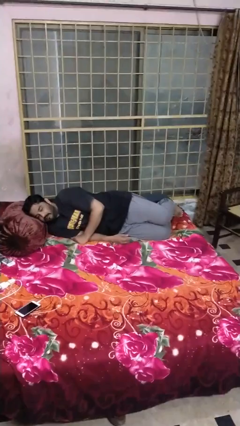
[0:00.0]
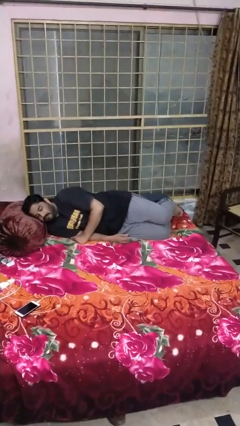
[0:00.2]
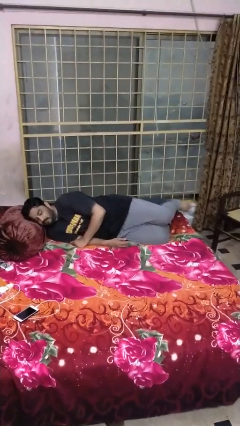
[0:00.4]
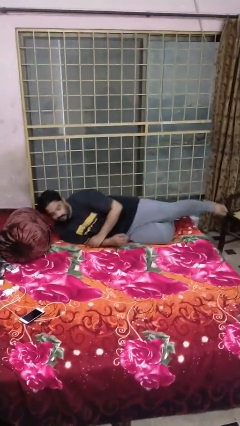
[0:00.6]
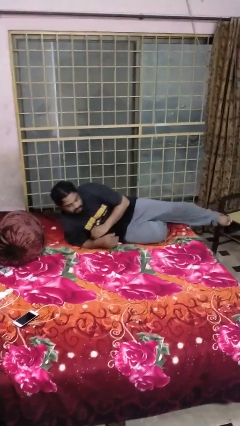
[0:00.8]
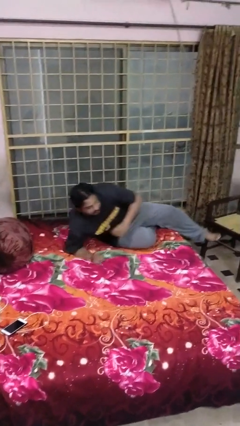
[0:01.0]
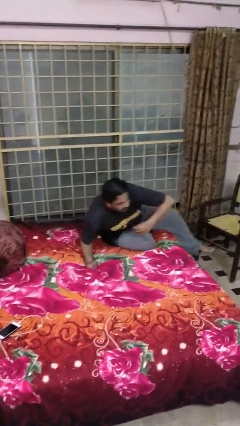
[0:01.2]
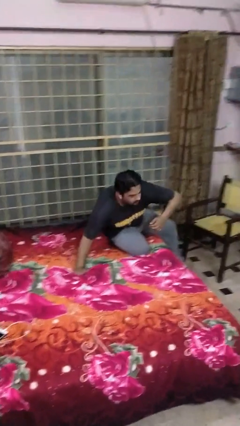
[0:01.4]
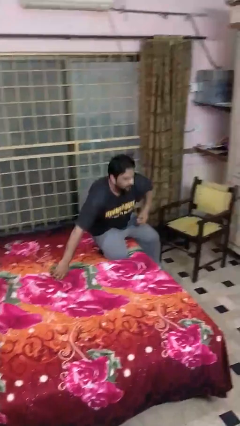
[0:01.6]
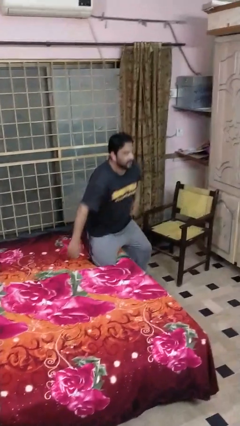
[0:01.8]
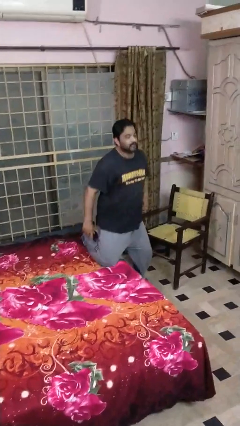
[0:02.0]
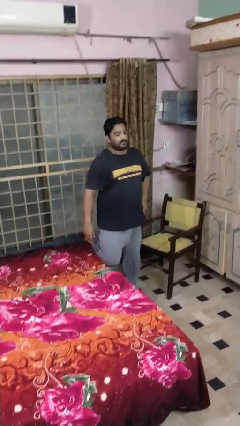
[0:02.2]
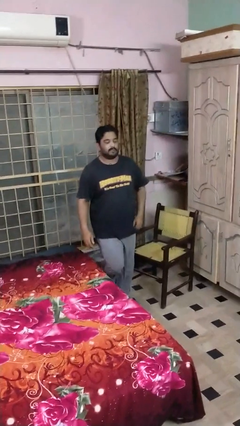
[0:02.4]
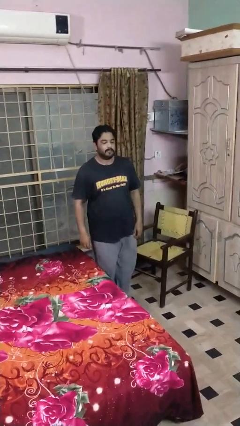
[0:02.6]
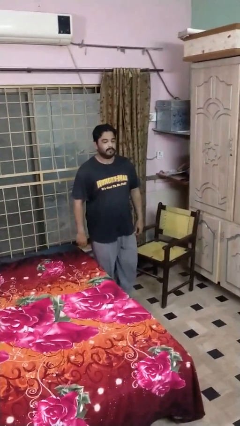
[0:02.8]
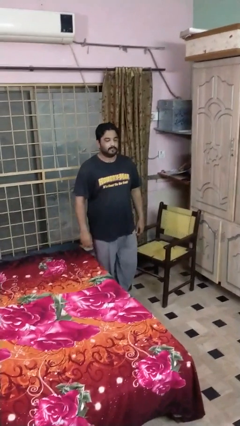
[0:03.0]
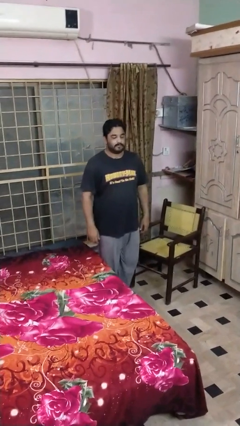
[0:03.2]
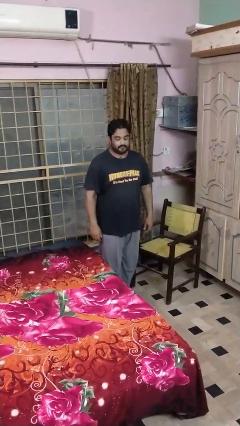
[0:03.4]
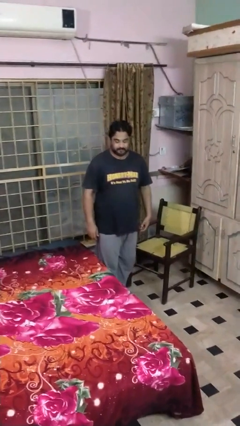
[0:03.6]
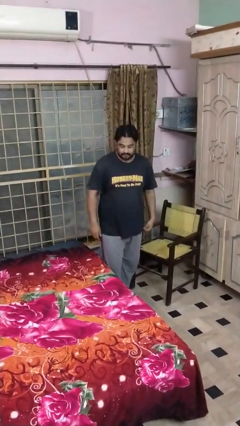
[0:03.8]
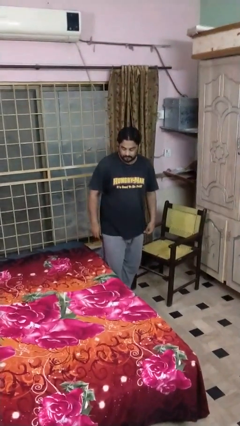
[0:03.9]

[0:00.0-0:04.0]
person stands up

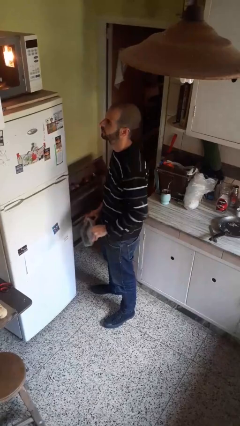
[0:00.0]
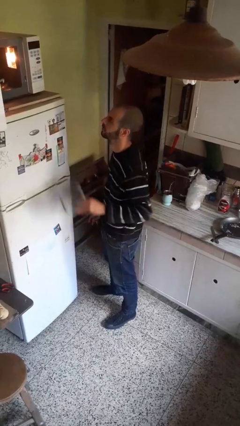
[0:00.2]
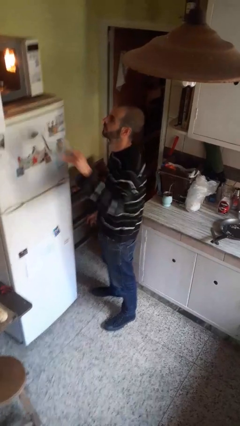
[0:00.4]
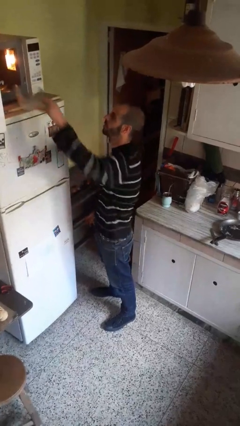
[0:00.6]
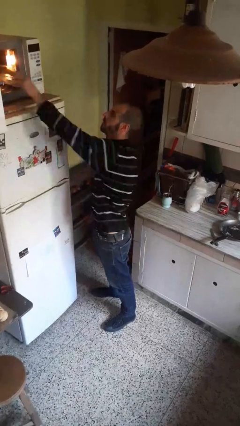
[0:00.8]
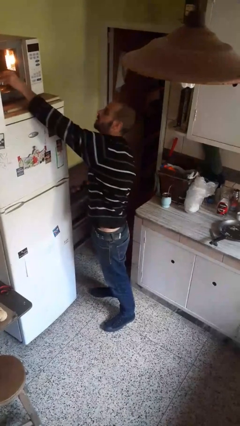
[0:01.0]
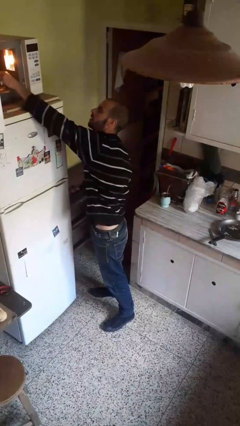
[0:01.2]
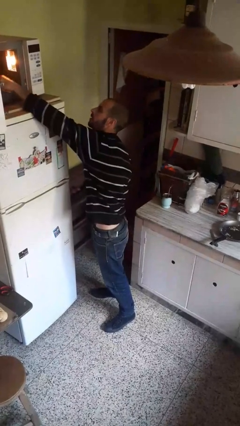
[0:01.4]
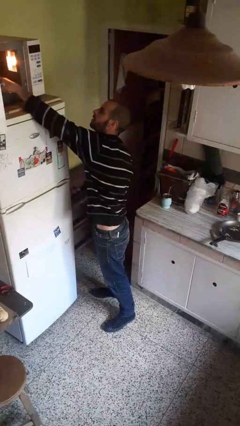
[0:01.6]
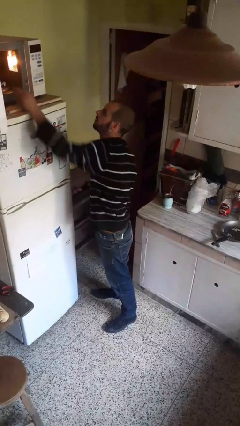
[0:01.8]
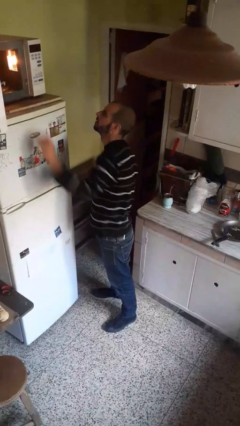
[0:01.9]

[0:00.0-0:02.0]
person puts object into microwave

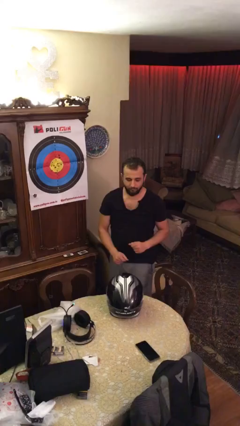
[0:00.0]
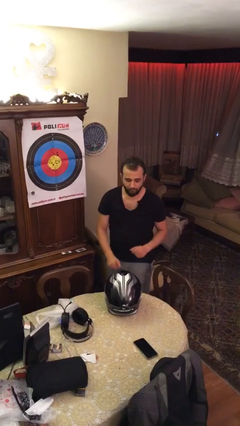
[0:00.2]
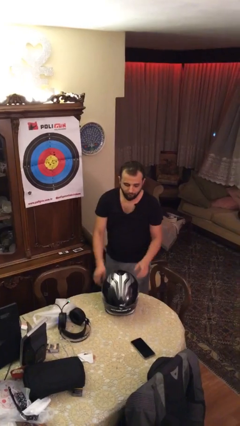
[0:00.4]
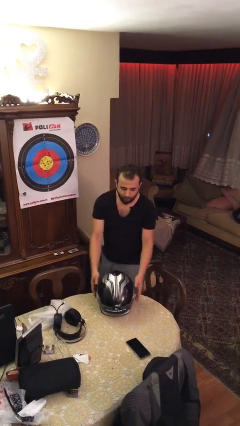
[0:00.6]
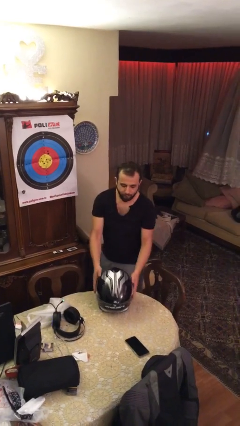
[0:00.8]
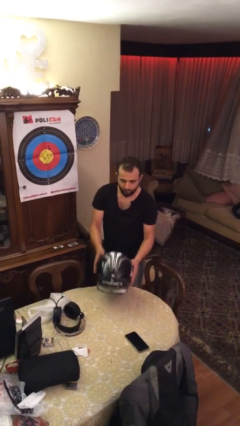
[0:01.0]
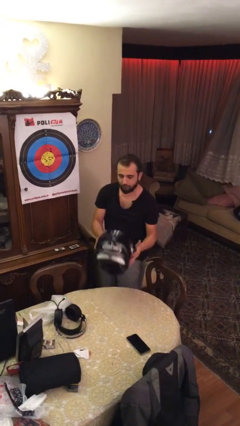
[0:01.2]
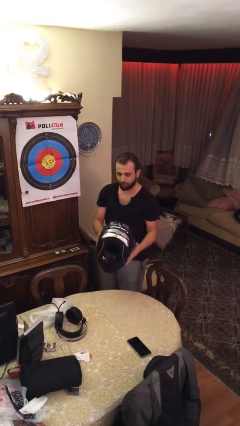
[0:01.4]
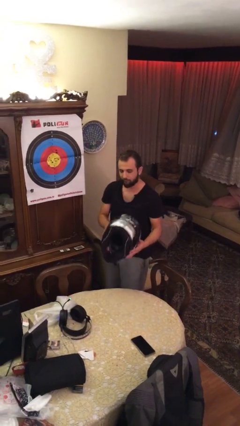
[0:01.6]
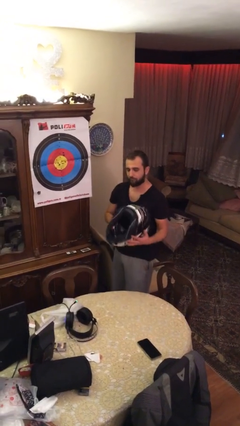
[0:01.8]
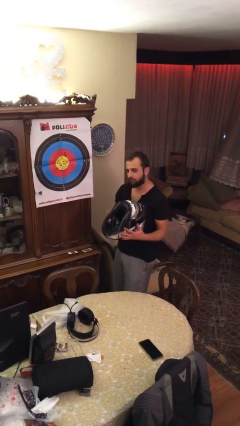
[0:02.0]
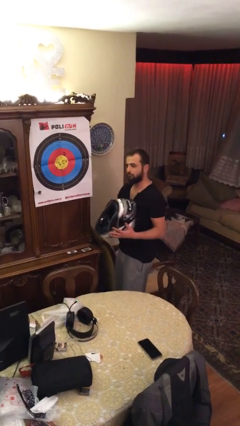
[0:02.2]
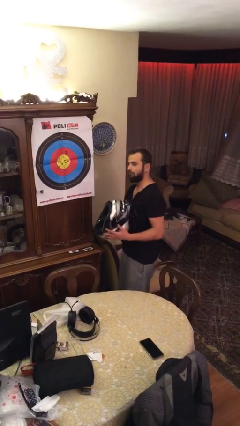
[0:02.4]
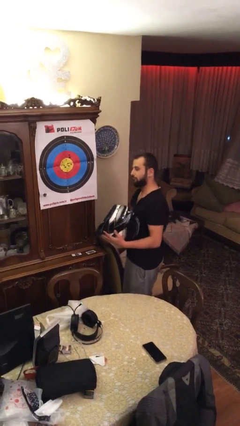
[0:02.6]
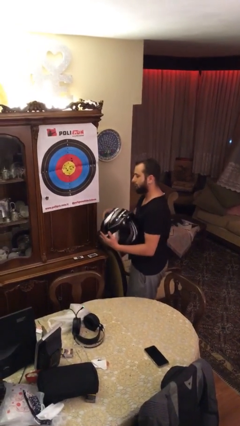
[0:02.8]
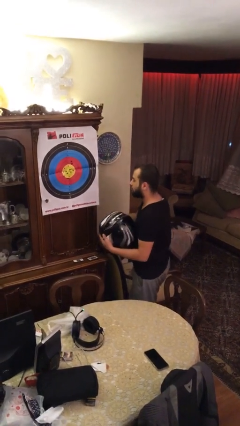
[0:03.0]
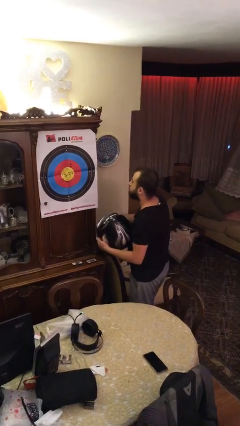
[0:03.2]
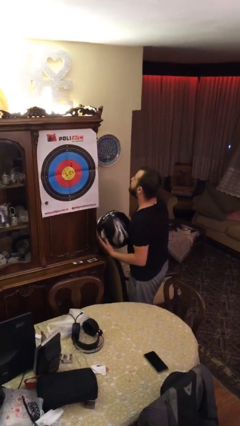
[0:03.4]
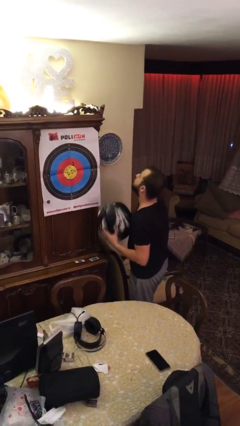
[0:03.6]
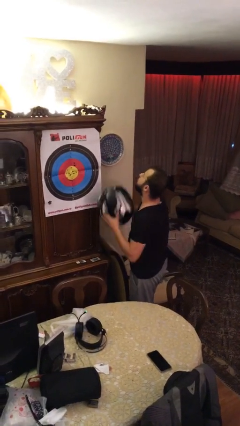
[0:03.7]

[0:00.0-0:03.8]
person picks up object from table

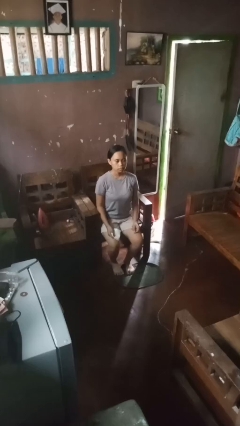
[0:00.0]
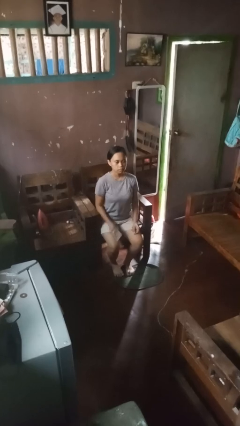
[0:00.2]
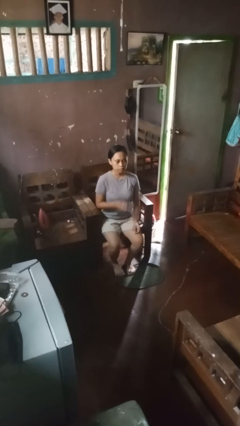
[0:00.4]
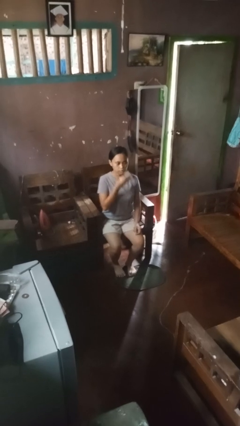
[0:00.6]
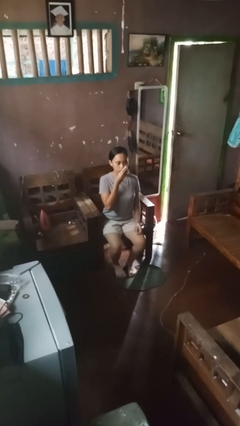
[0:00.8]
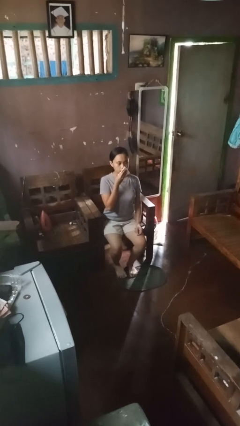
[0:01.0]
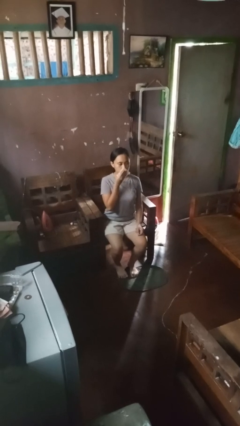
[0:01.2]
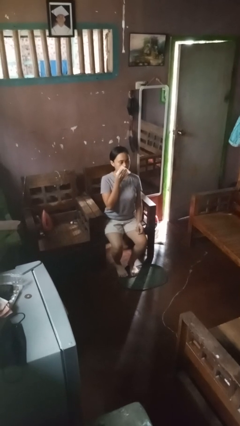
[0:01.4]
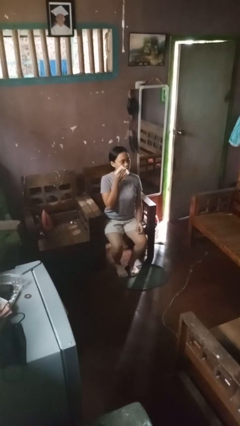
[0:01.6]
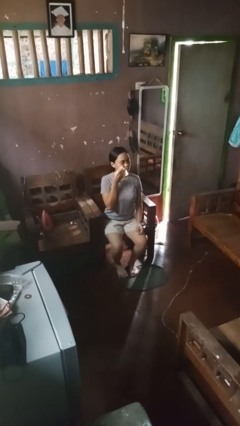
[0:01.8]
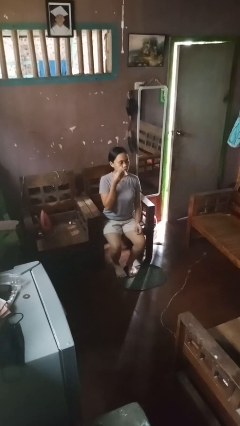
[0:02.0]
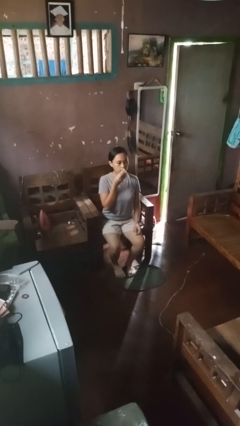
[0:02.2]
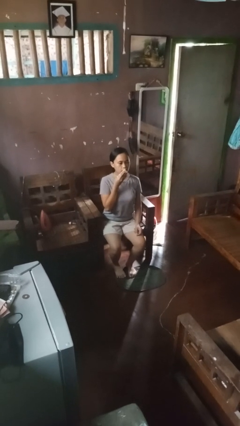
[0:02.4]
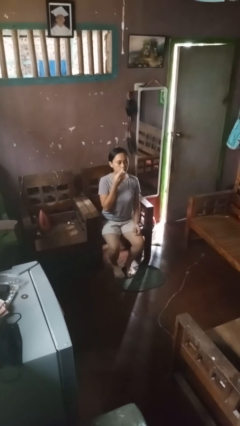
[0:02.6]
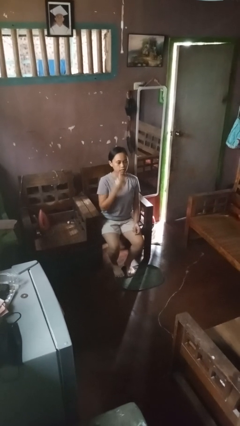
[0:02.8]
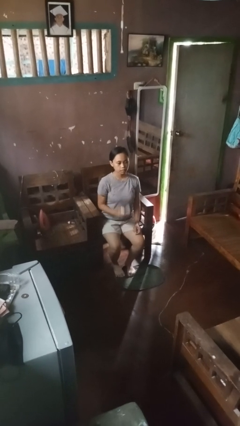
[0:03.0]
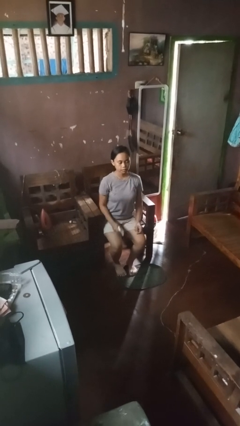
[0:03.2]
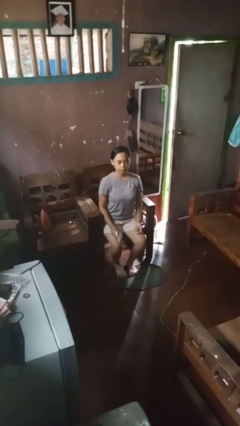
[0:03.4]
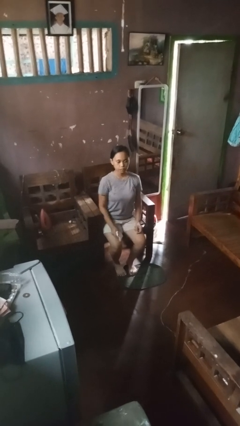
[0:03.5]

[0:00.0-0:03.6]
person wipes mouth with napkin

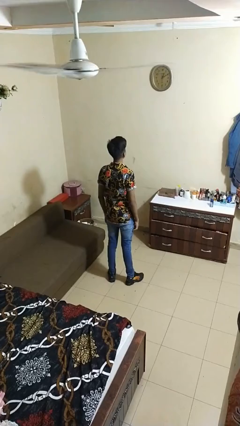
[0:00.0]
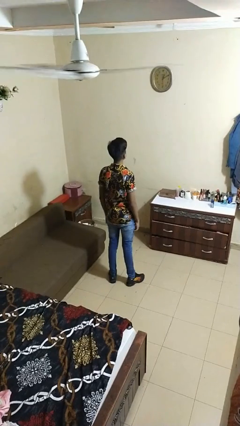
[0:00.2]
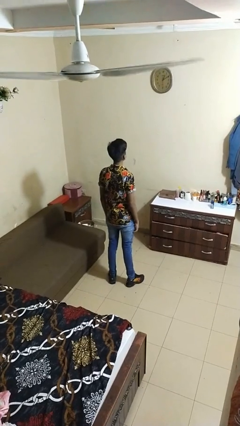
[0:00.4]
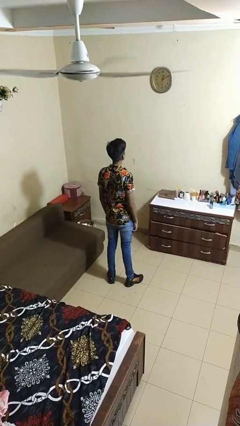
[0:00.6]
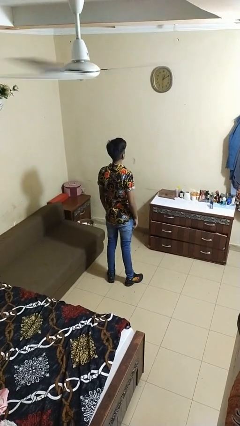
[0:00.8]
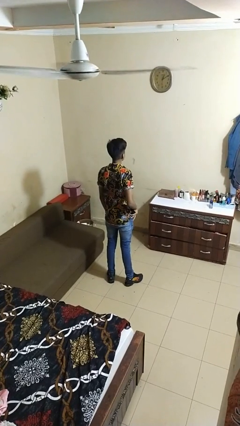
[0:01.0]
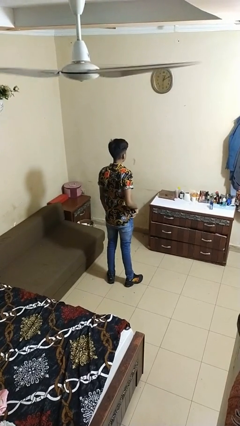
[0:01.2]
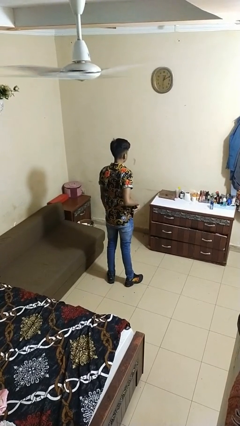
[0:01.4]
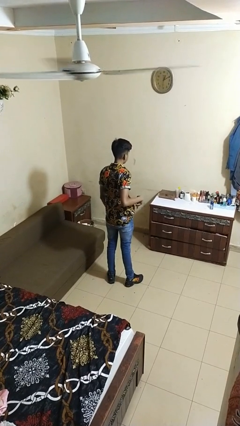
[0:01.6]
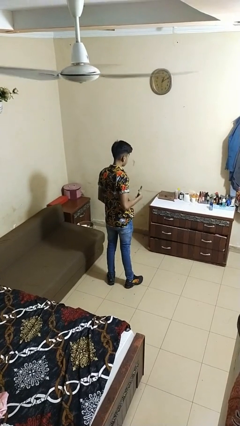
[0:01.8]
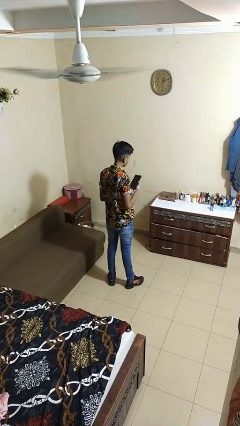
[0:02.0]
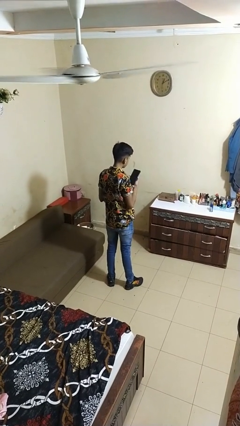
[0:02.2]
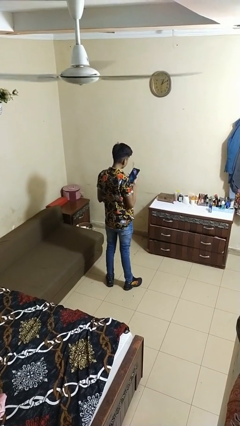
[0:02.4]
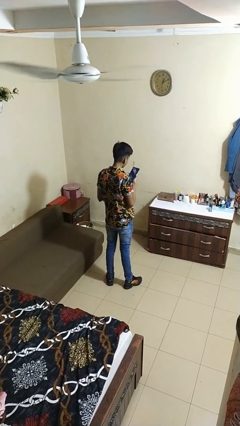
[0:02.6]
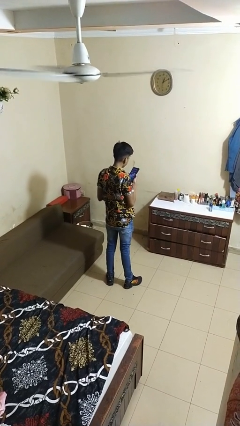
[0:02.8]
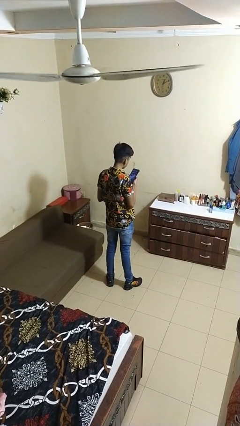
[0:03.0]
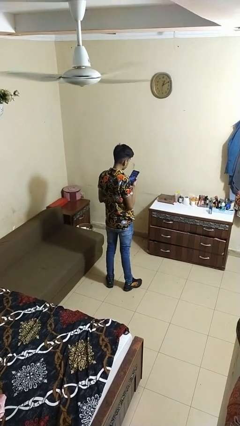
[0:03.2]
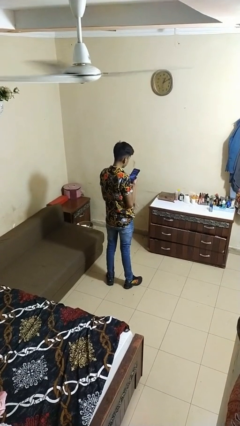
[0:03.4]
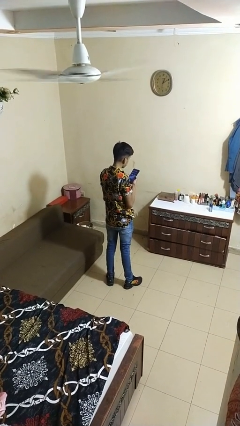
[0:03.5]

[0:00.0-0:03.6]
person takes phone from pocket

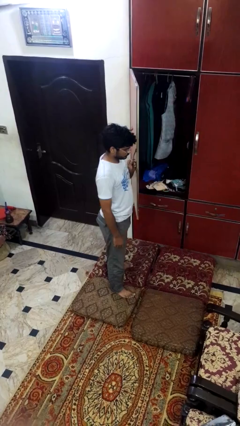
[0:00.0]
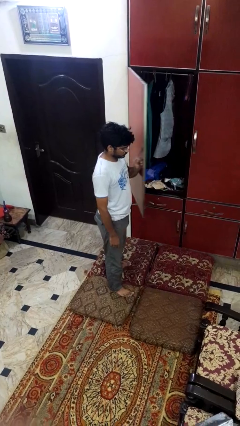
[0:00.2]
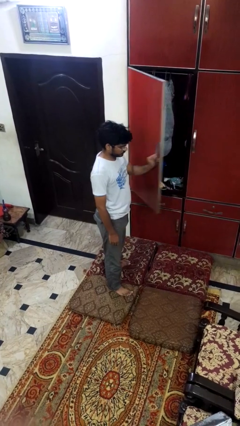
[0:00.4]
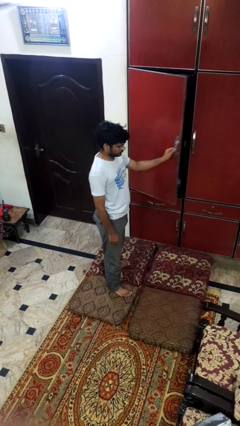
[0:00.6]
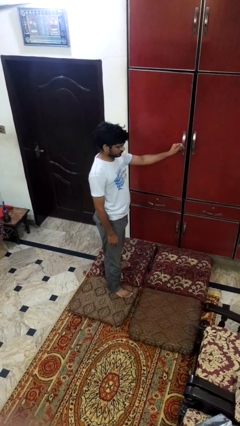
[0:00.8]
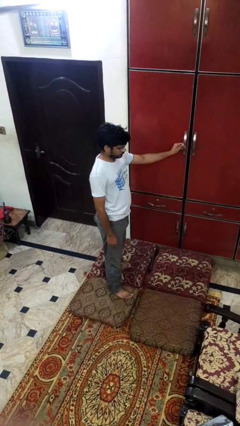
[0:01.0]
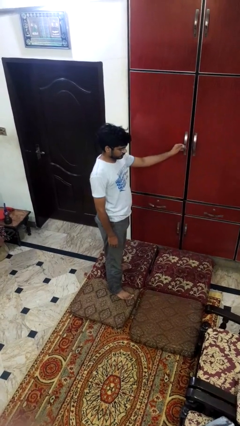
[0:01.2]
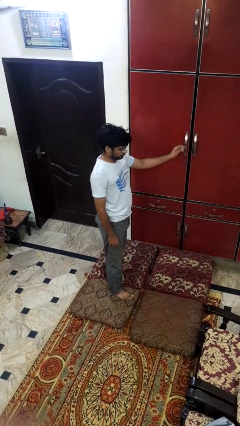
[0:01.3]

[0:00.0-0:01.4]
person closes closet door
